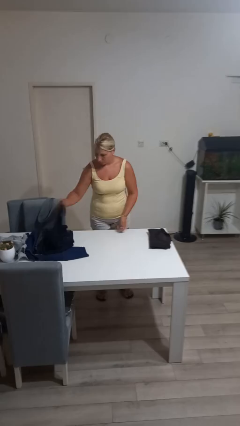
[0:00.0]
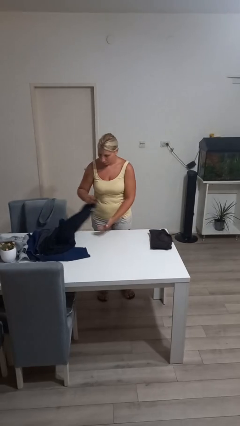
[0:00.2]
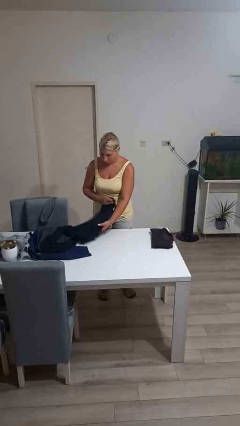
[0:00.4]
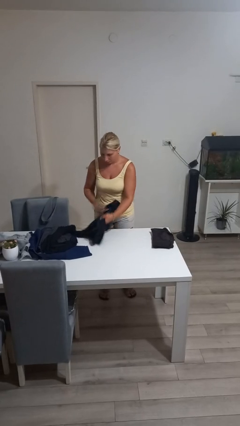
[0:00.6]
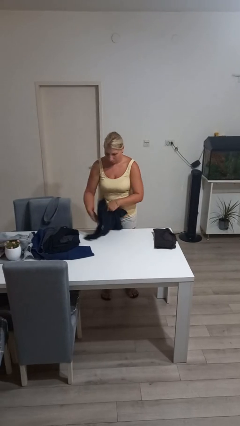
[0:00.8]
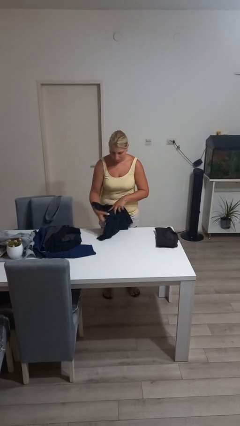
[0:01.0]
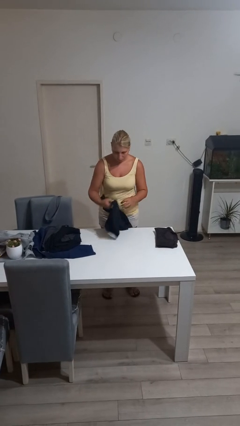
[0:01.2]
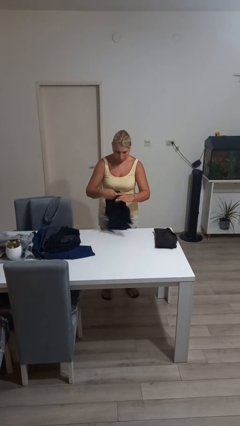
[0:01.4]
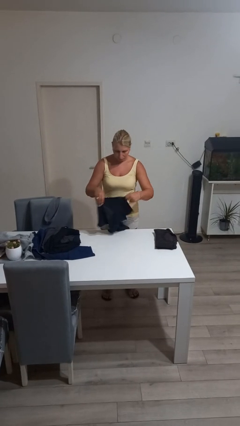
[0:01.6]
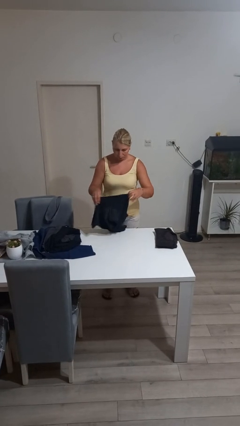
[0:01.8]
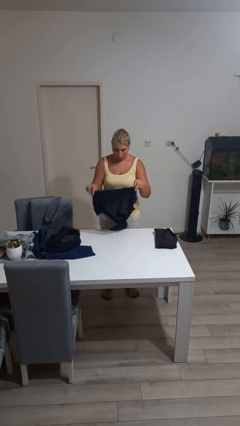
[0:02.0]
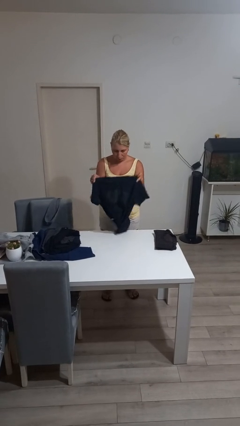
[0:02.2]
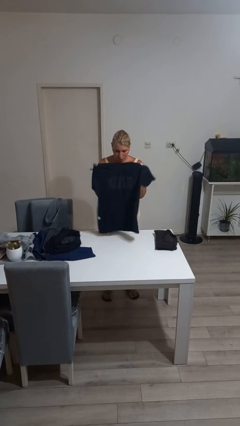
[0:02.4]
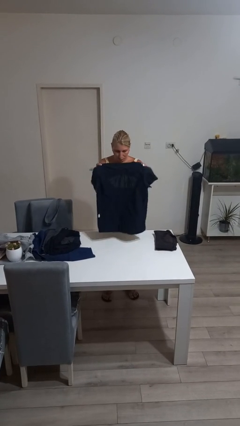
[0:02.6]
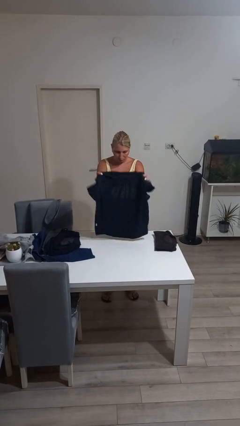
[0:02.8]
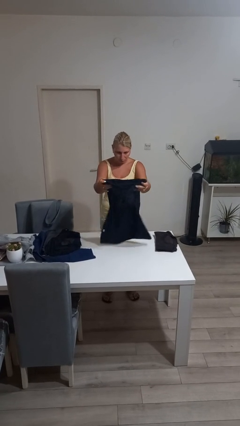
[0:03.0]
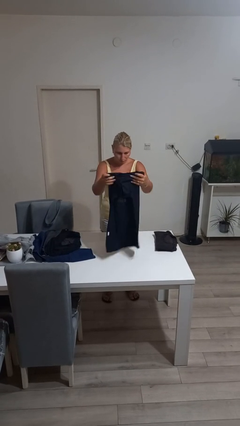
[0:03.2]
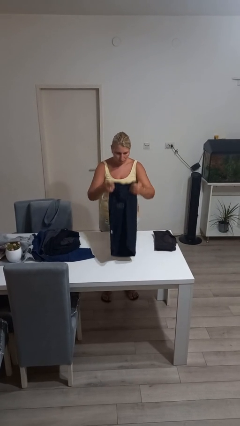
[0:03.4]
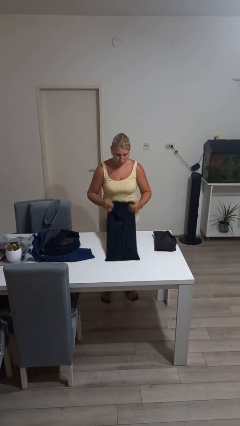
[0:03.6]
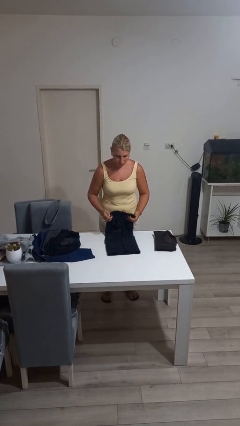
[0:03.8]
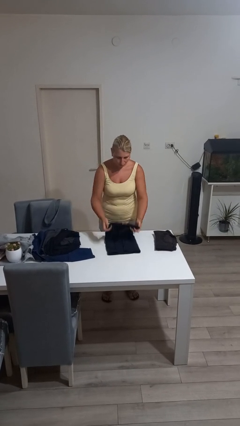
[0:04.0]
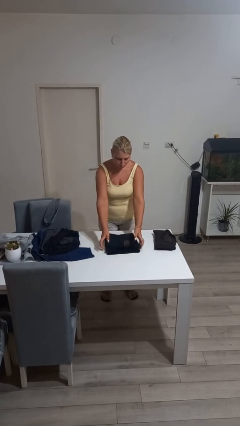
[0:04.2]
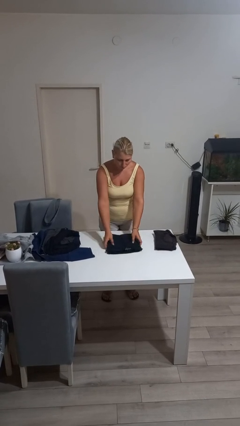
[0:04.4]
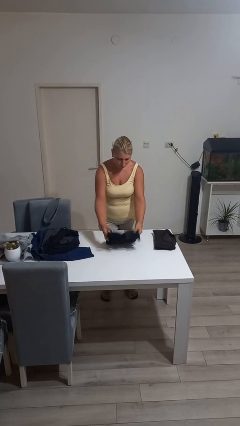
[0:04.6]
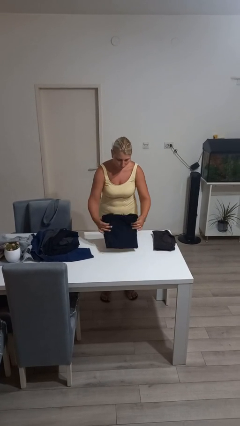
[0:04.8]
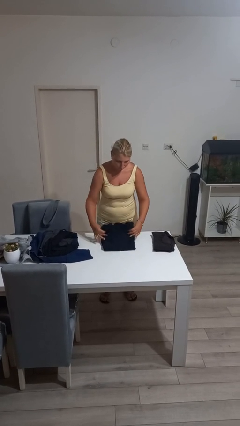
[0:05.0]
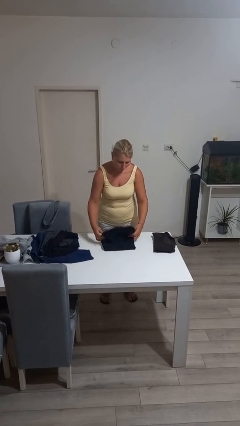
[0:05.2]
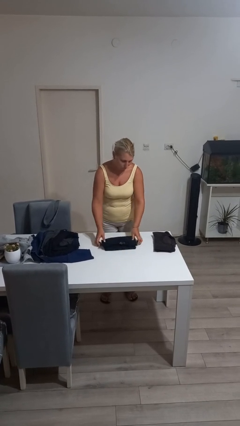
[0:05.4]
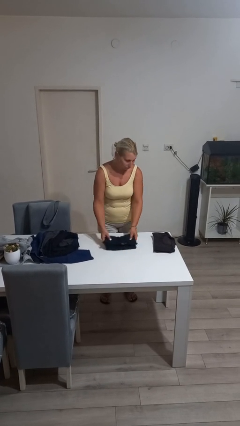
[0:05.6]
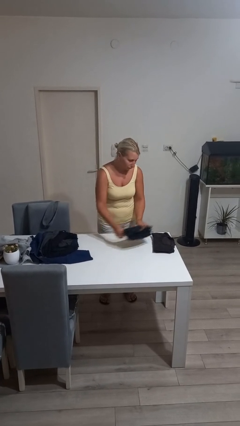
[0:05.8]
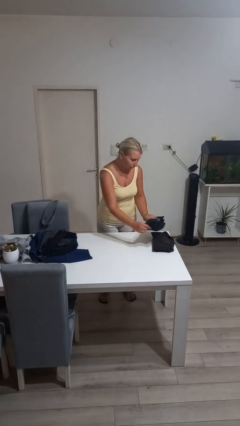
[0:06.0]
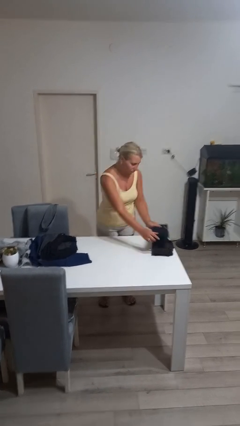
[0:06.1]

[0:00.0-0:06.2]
person folds shirt

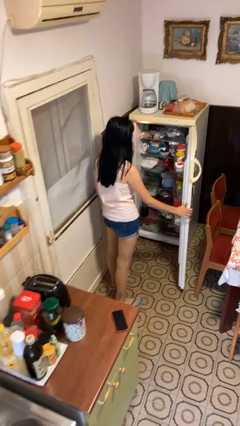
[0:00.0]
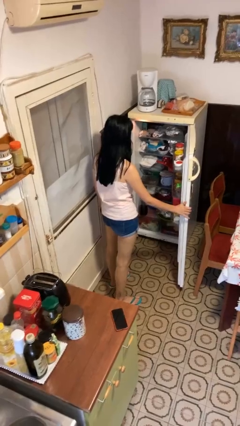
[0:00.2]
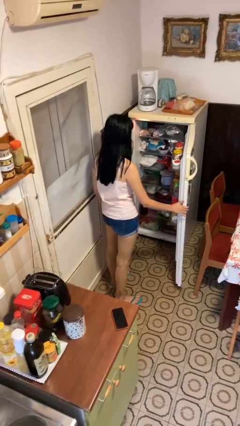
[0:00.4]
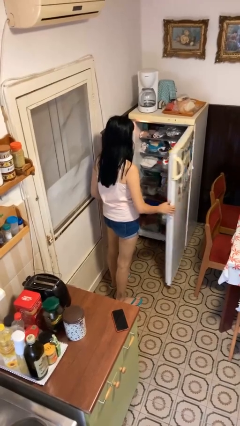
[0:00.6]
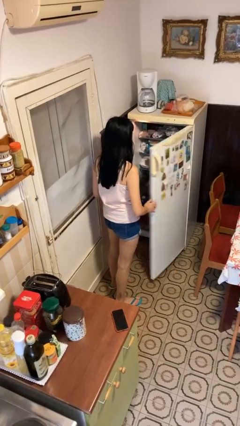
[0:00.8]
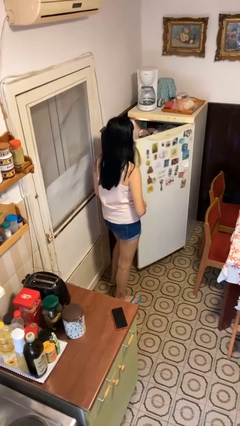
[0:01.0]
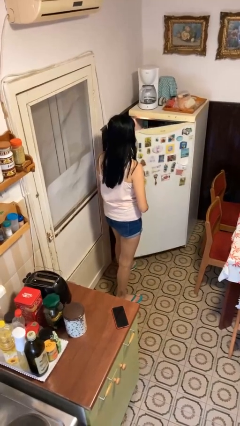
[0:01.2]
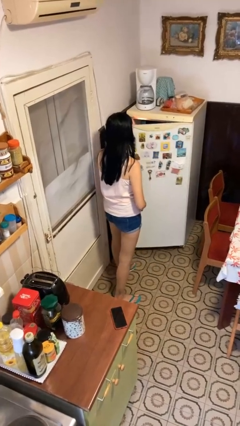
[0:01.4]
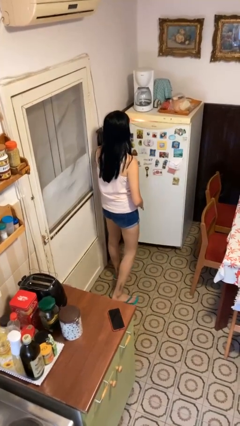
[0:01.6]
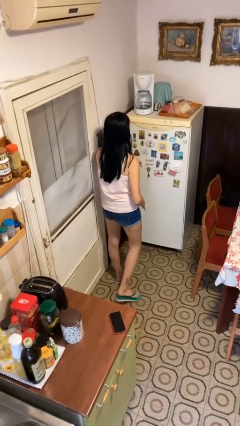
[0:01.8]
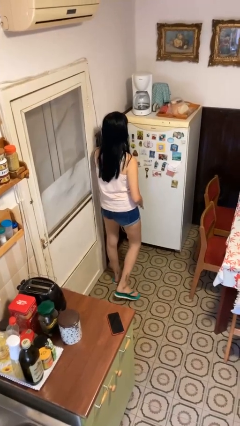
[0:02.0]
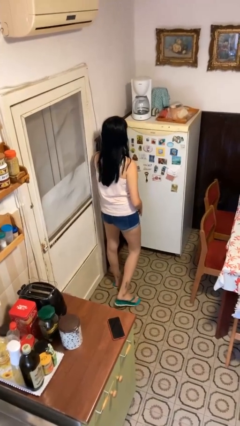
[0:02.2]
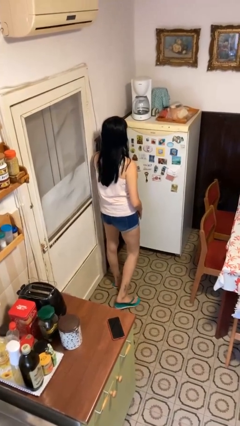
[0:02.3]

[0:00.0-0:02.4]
person closes refrigerator

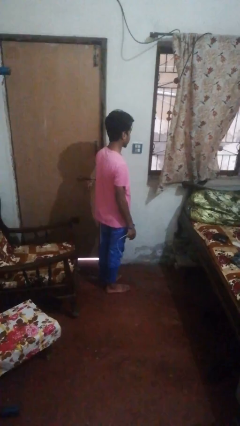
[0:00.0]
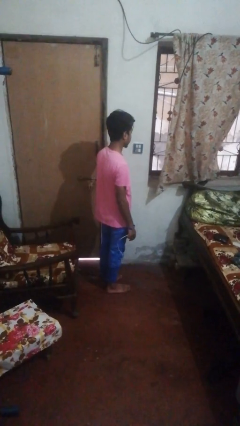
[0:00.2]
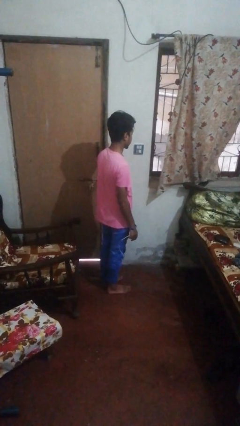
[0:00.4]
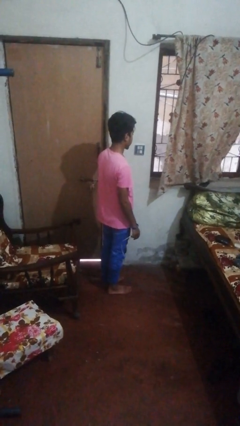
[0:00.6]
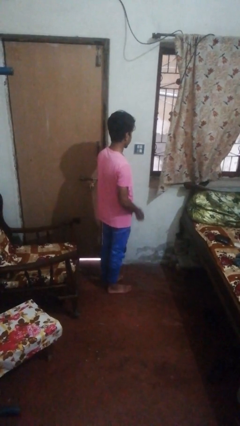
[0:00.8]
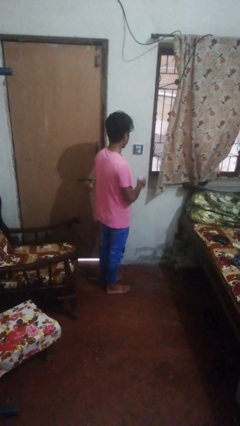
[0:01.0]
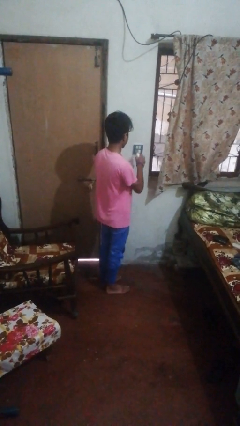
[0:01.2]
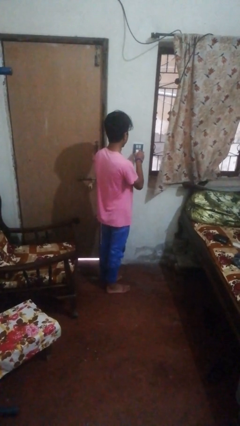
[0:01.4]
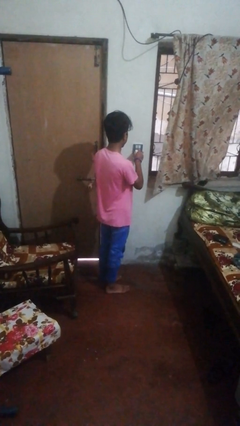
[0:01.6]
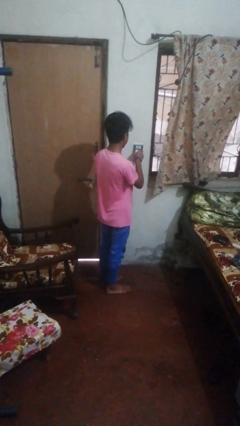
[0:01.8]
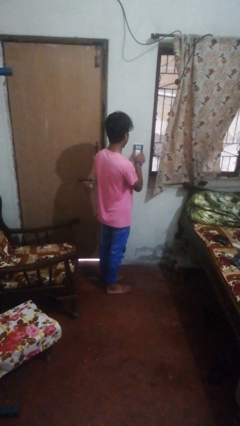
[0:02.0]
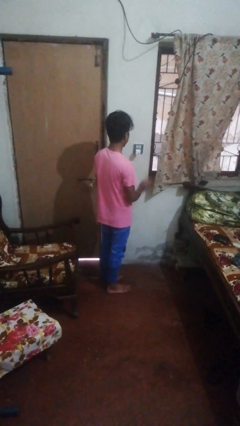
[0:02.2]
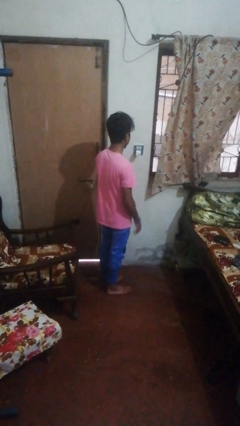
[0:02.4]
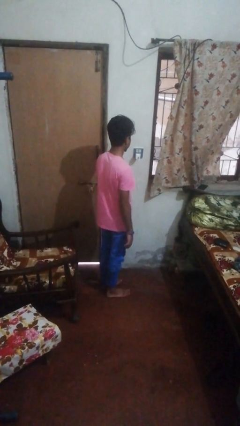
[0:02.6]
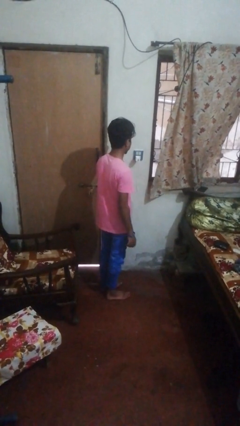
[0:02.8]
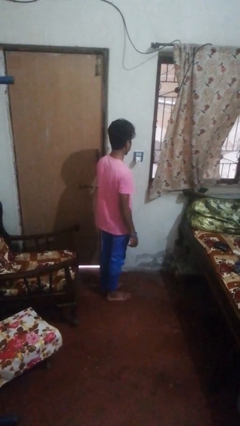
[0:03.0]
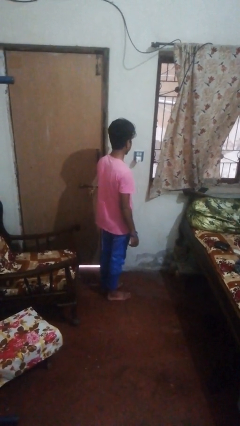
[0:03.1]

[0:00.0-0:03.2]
person plugs into electrical socket

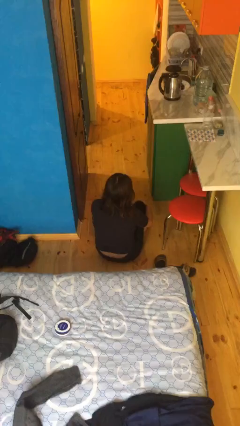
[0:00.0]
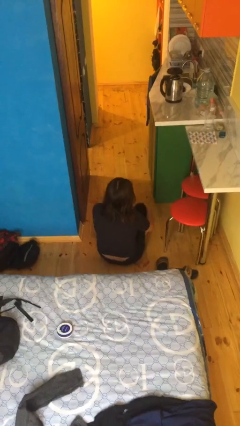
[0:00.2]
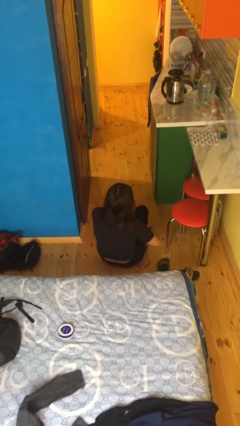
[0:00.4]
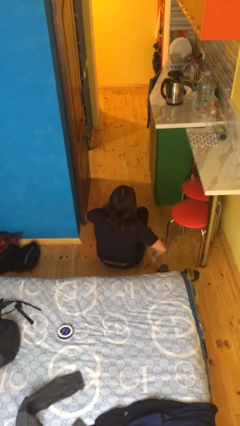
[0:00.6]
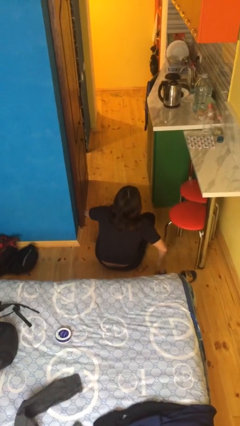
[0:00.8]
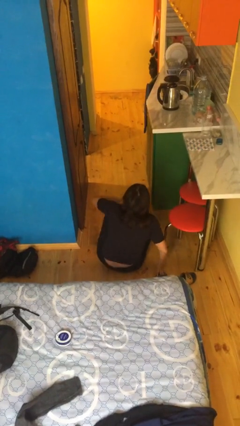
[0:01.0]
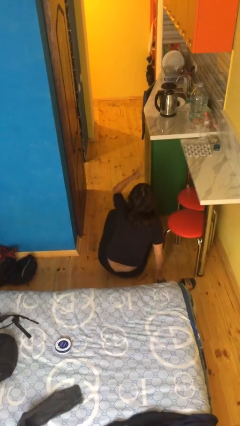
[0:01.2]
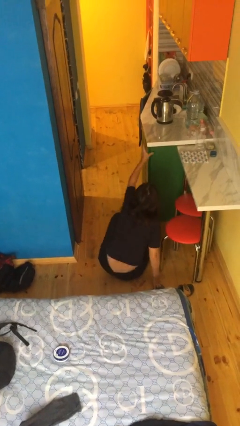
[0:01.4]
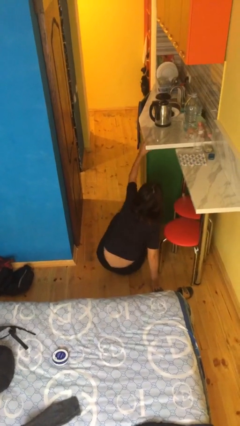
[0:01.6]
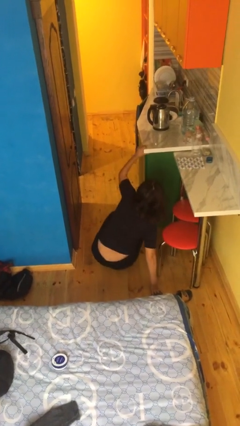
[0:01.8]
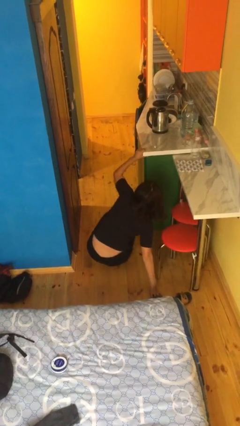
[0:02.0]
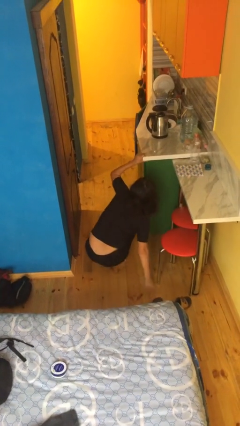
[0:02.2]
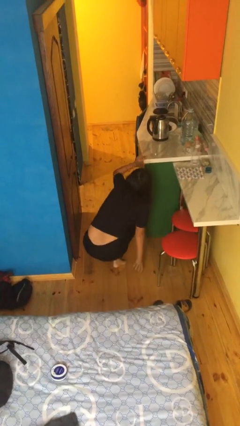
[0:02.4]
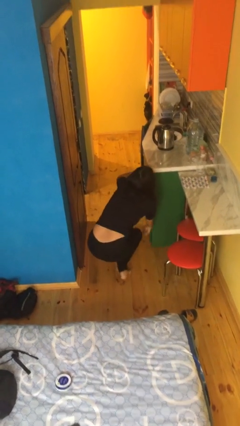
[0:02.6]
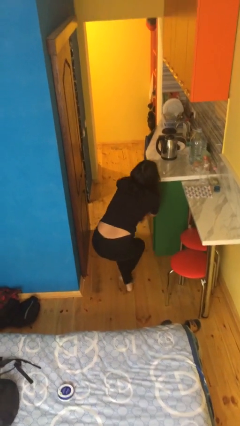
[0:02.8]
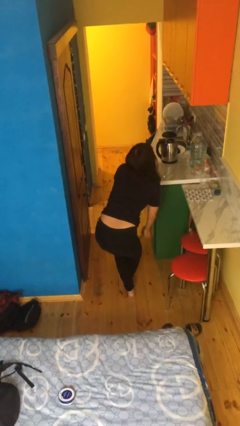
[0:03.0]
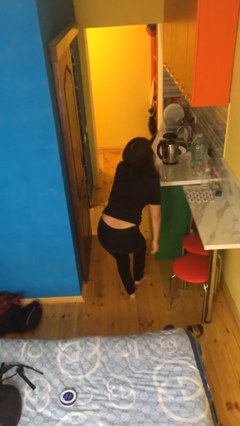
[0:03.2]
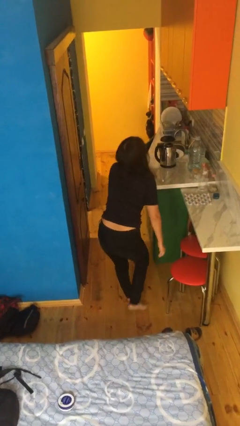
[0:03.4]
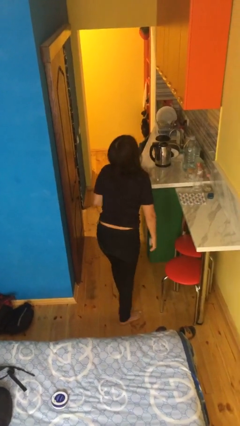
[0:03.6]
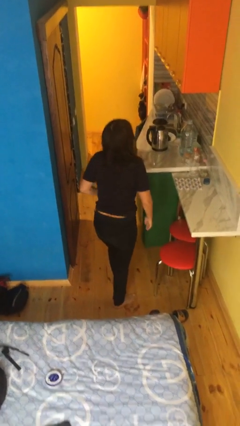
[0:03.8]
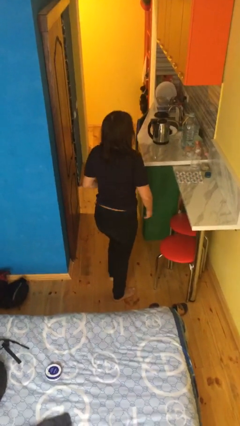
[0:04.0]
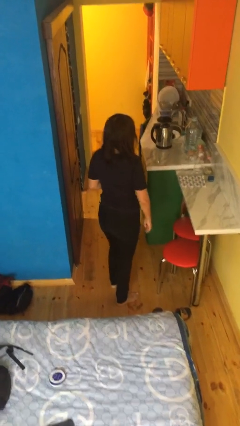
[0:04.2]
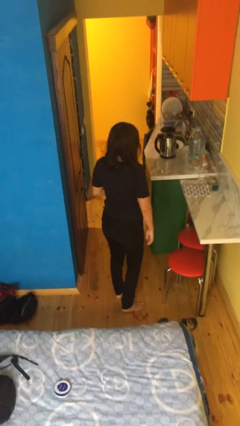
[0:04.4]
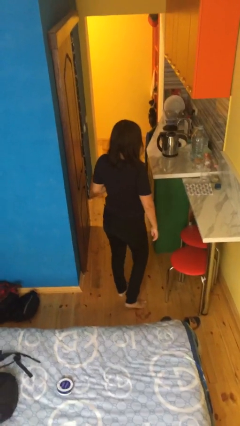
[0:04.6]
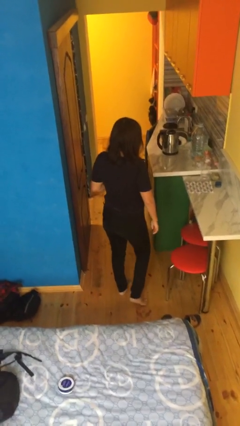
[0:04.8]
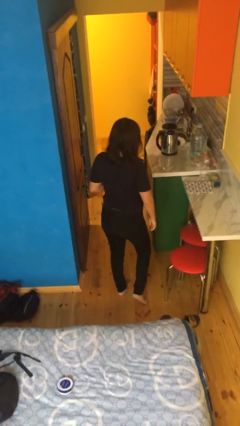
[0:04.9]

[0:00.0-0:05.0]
person stands up from floor

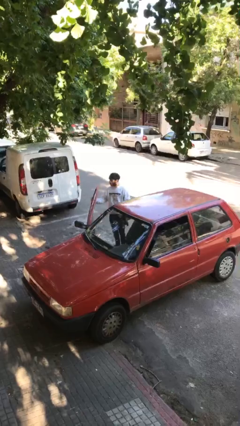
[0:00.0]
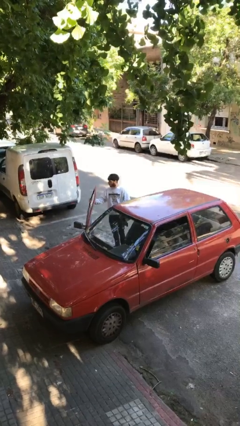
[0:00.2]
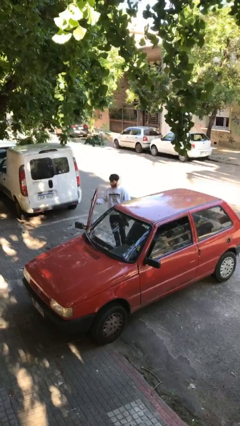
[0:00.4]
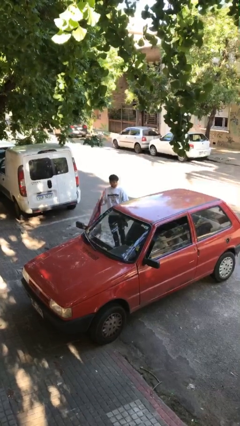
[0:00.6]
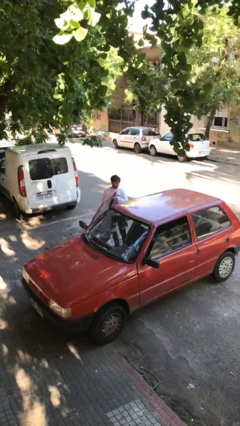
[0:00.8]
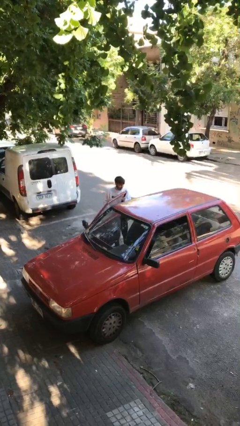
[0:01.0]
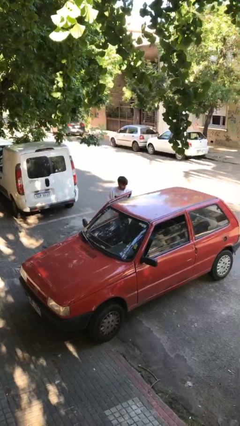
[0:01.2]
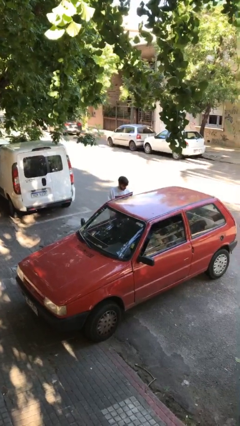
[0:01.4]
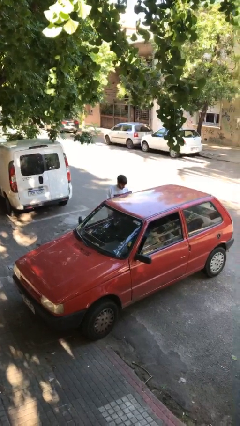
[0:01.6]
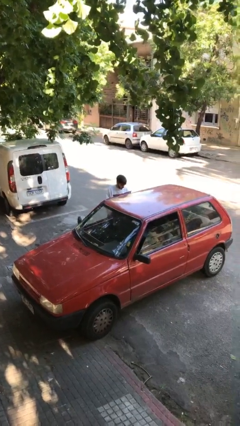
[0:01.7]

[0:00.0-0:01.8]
person closes car door
